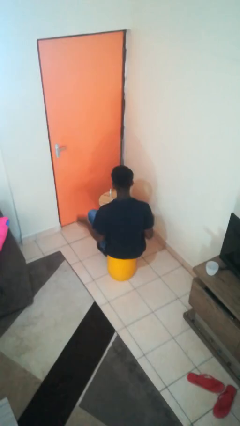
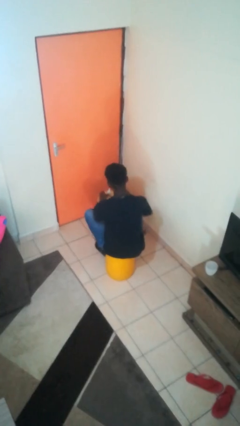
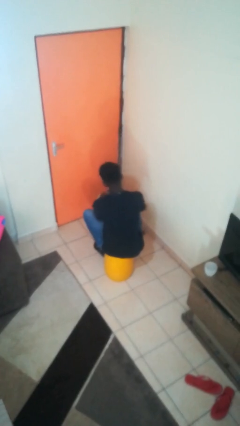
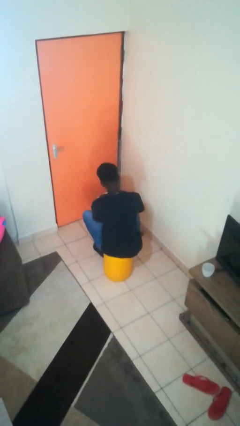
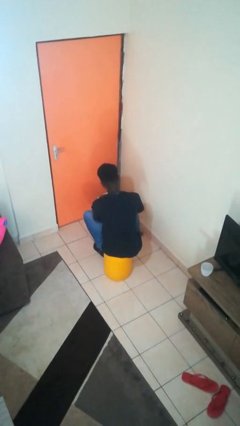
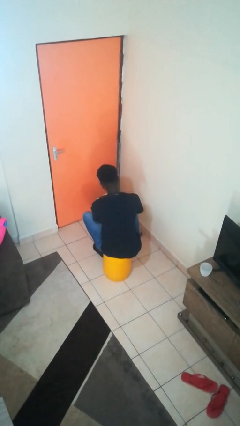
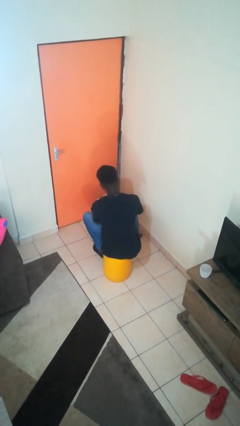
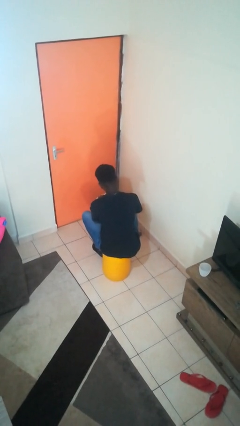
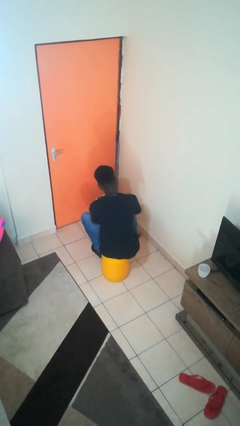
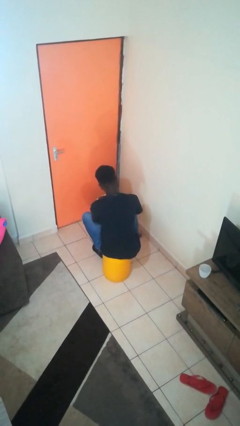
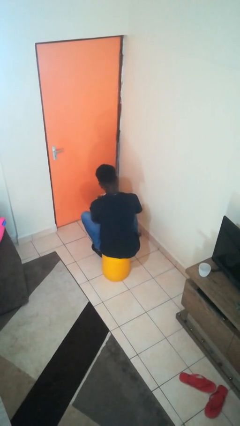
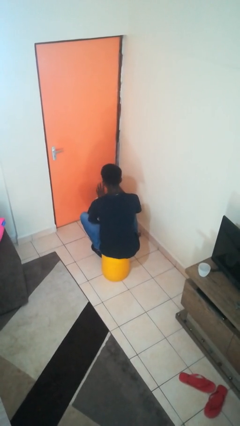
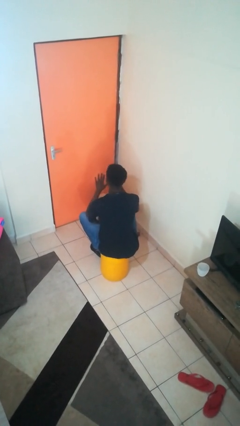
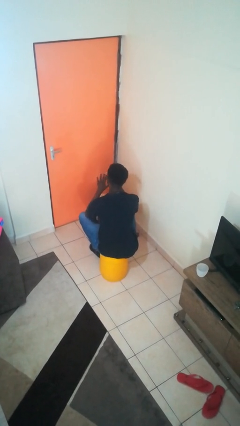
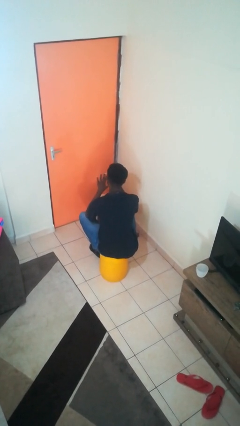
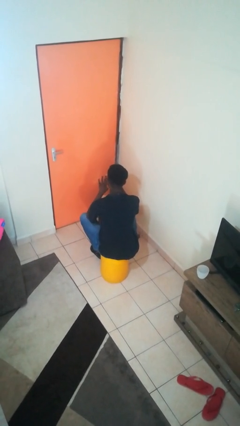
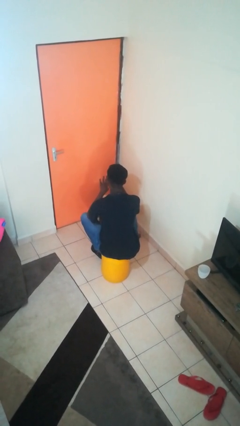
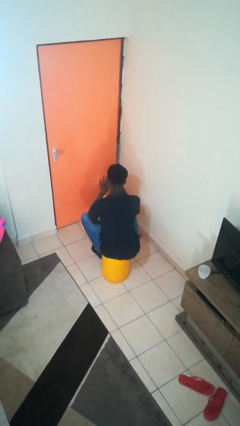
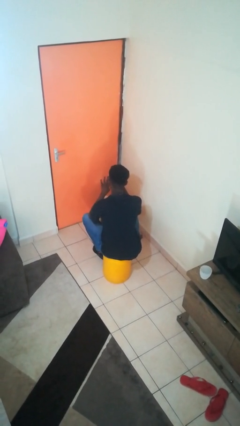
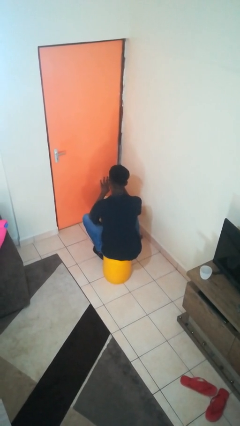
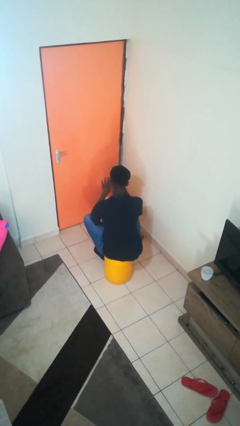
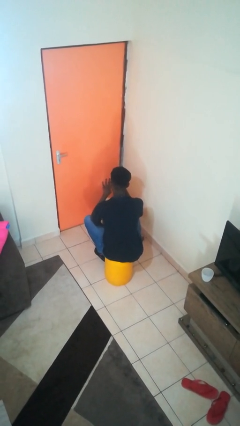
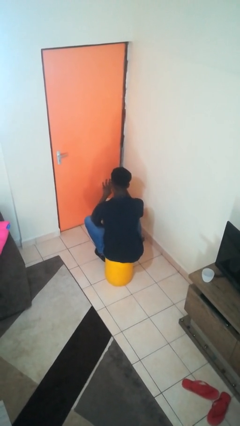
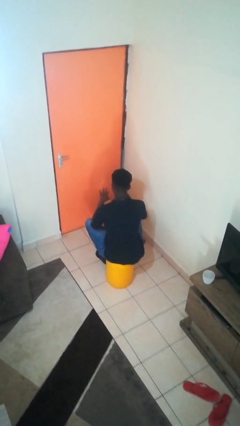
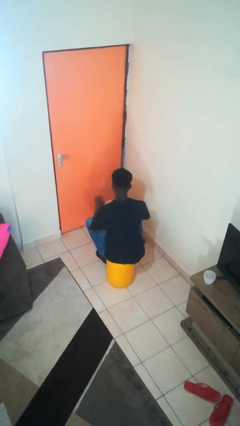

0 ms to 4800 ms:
person paints fingernails

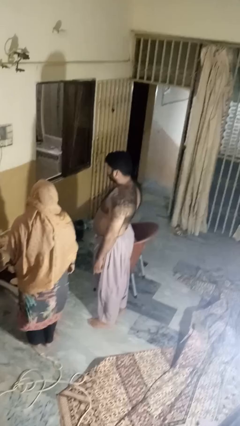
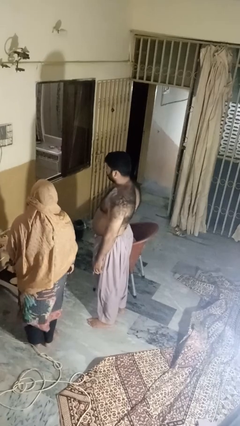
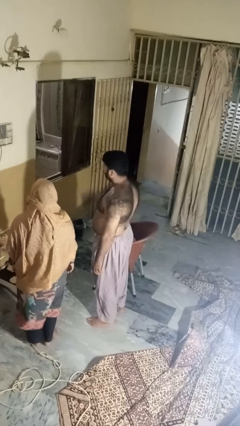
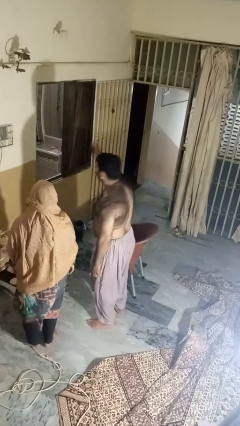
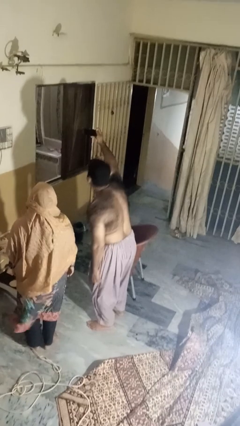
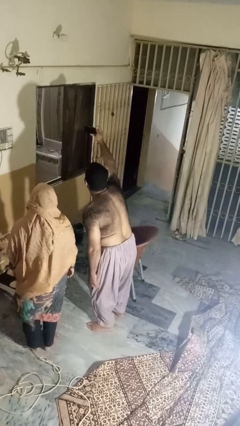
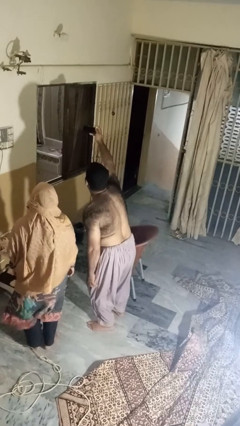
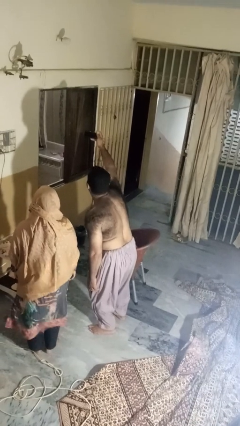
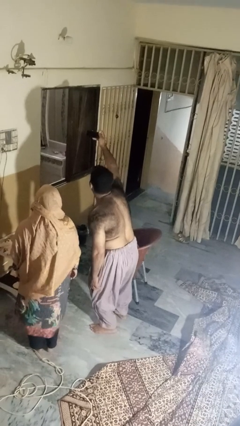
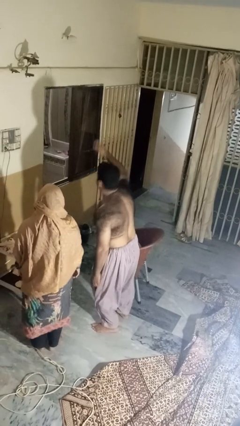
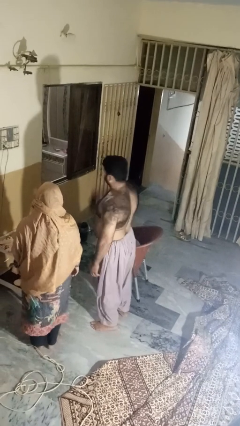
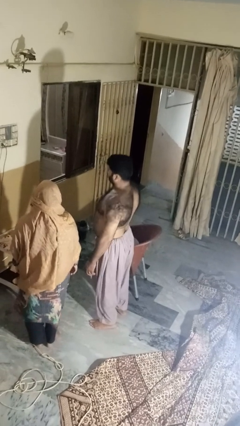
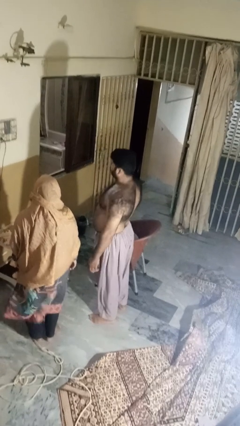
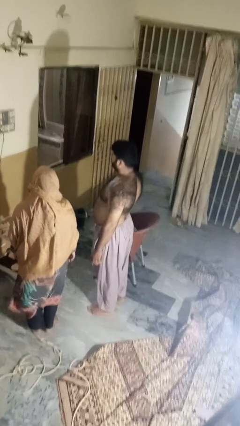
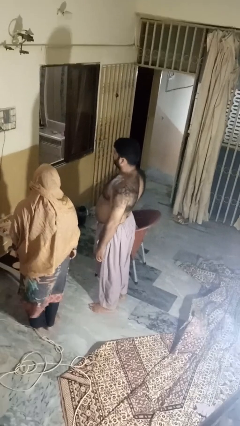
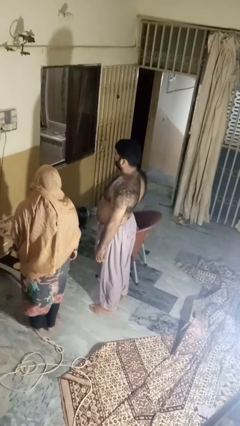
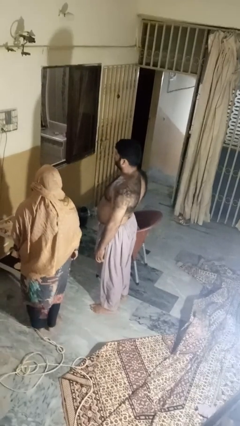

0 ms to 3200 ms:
person takes selfie with person

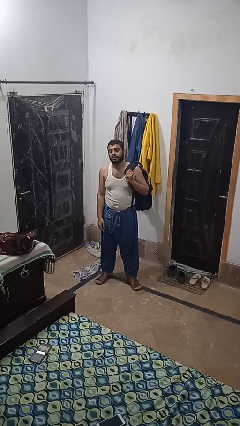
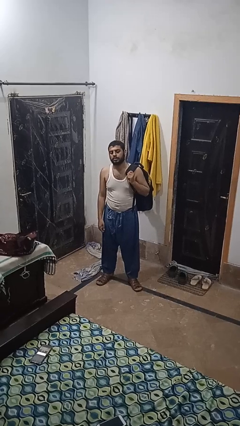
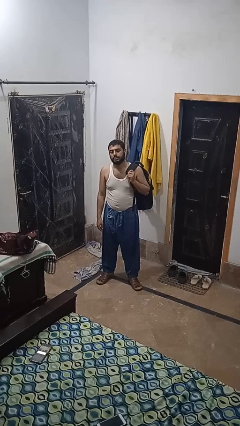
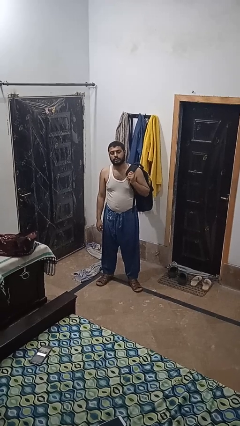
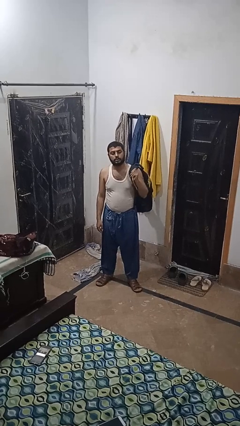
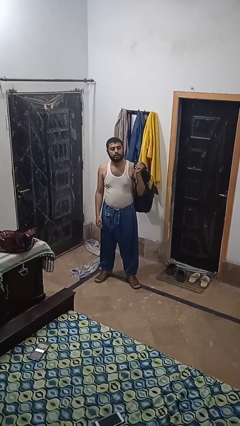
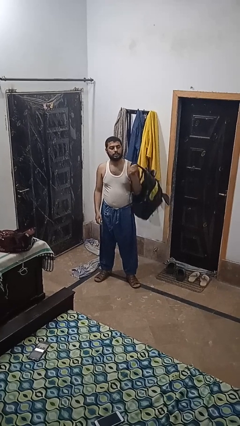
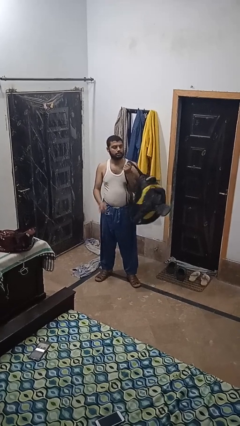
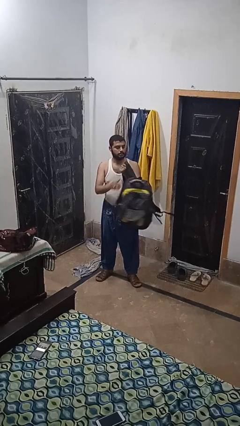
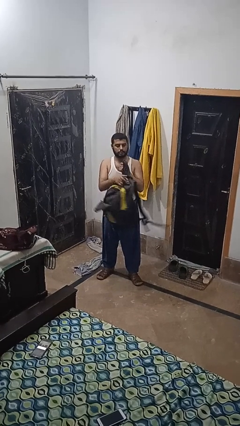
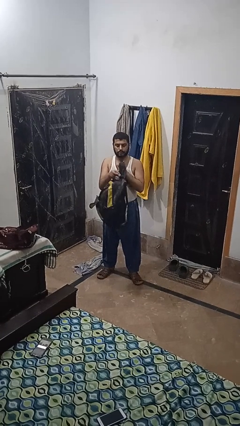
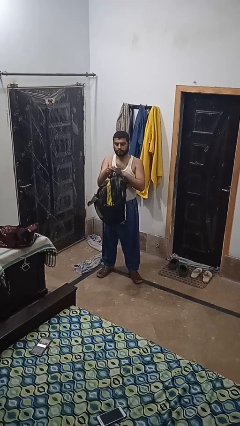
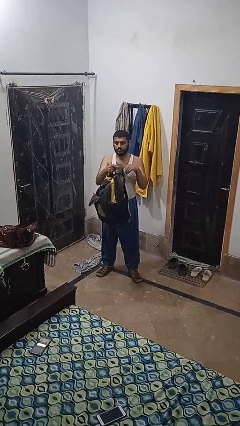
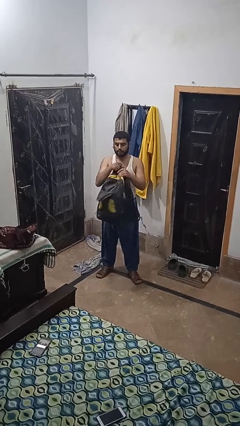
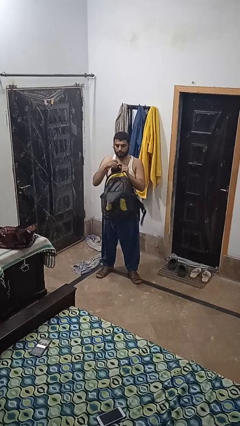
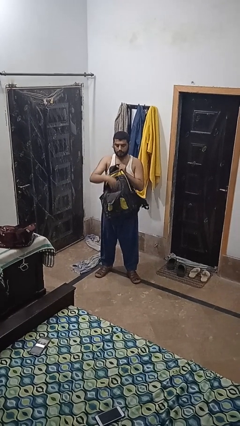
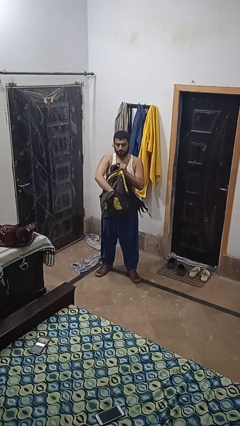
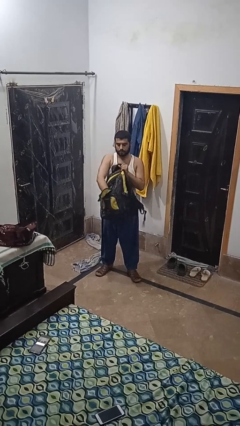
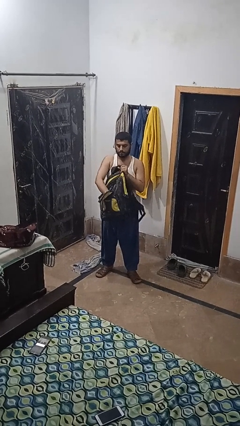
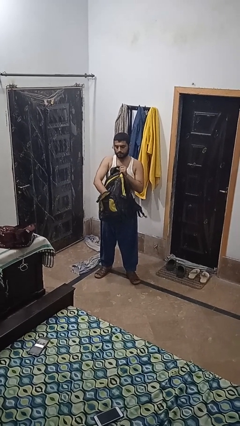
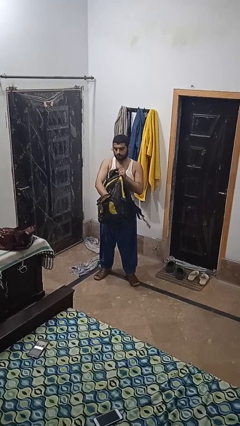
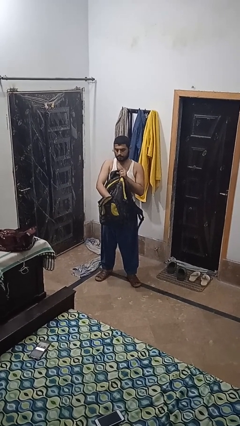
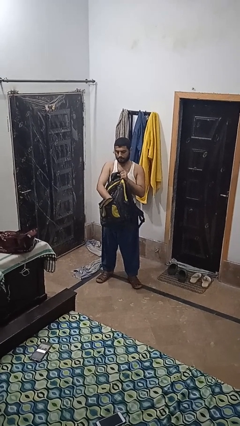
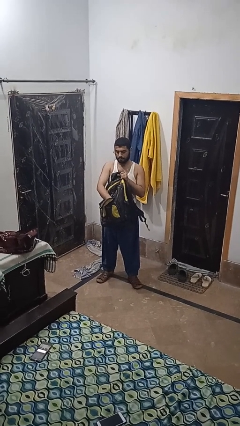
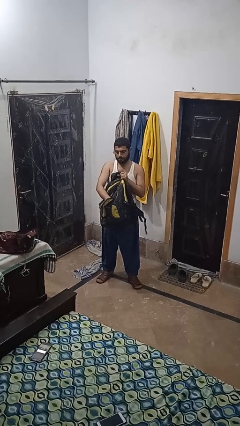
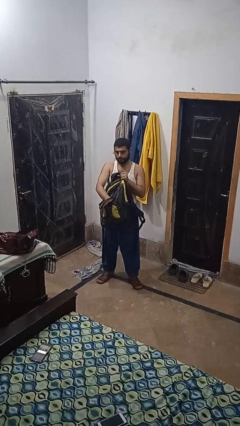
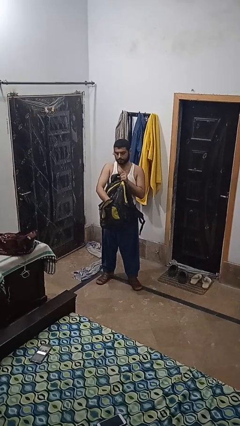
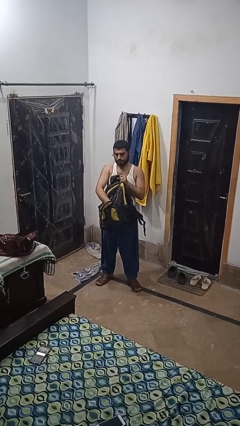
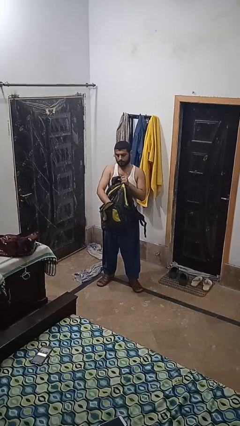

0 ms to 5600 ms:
person searches in backpack

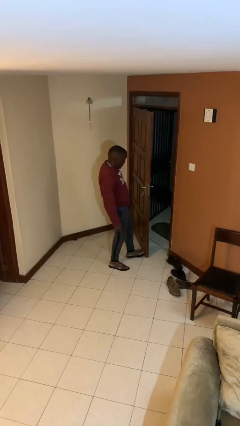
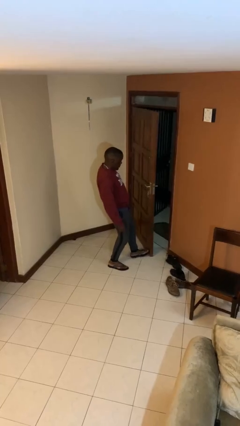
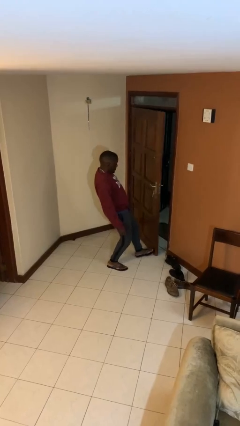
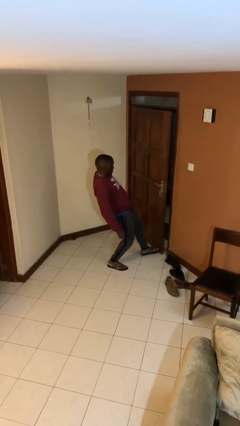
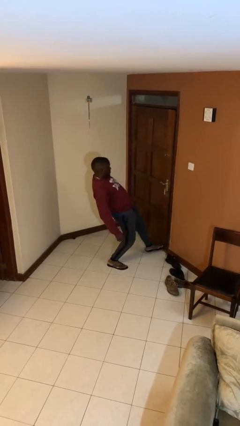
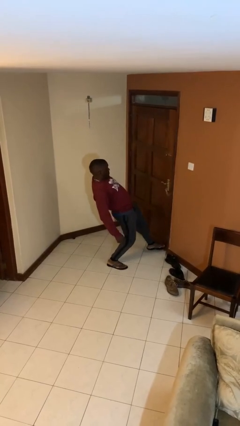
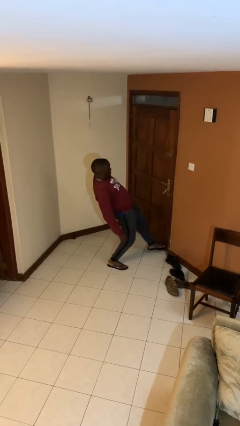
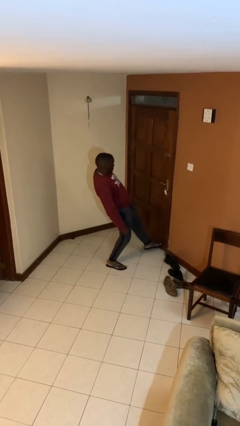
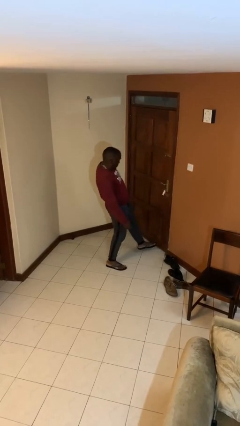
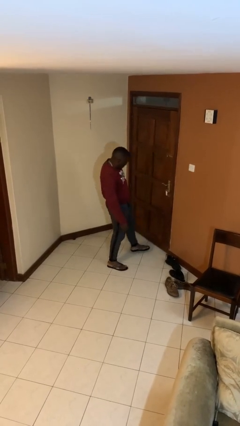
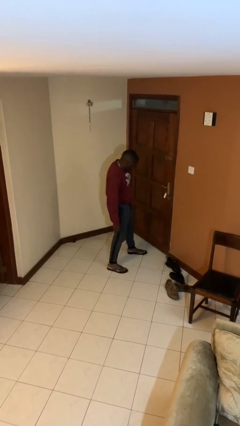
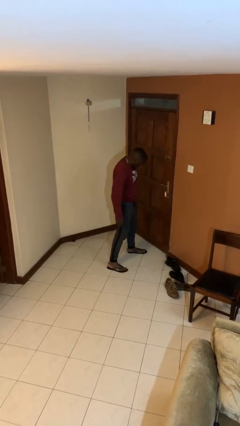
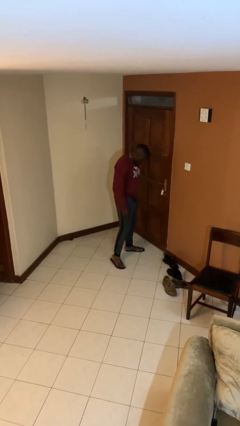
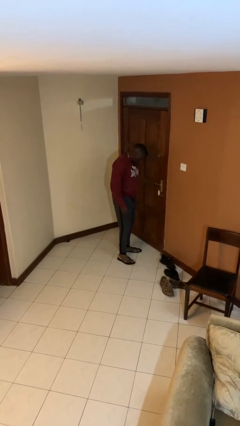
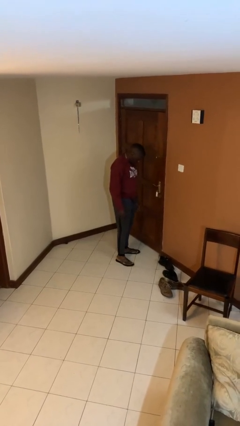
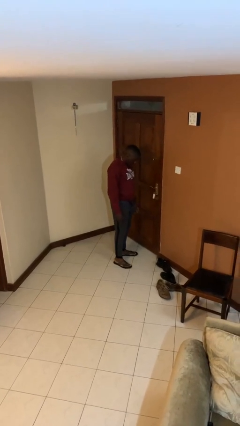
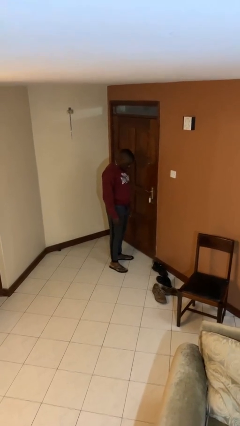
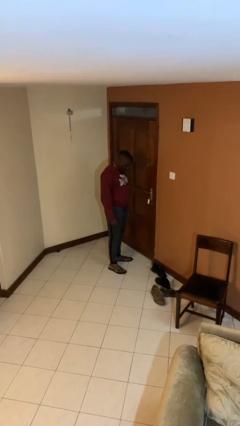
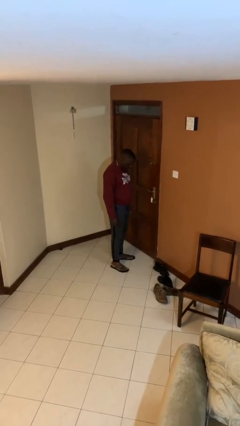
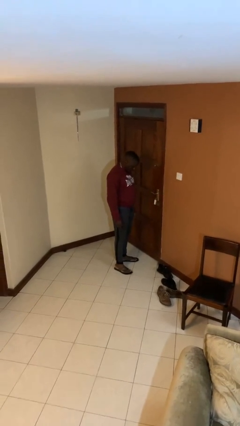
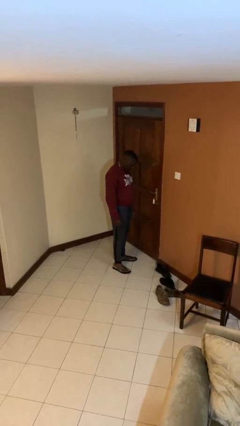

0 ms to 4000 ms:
person closes door with foot
